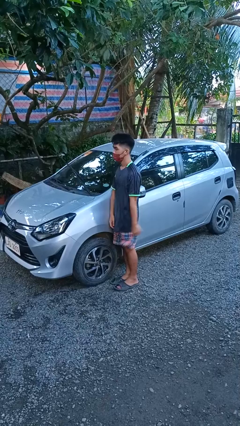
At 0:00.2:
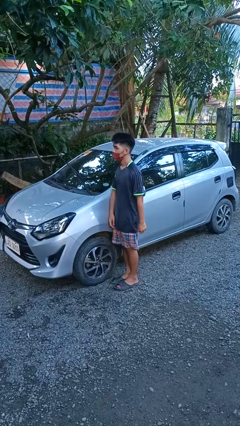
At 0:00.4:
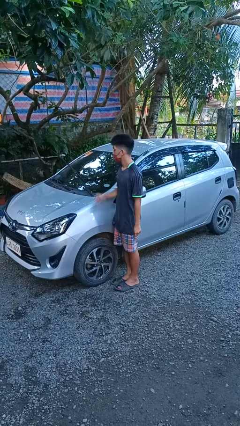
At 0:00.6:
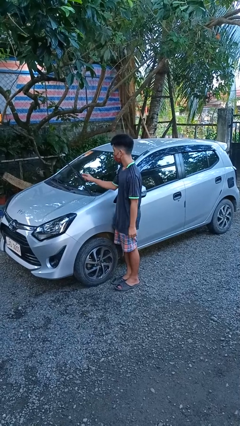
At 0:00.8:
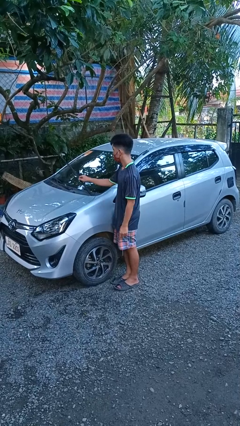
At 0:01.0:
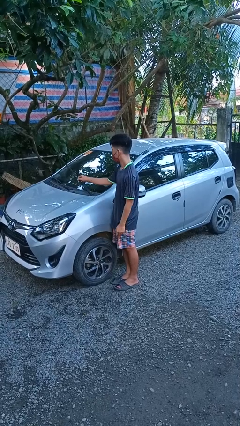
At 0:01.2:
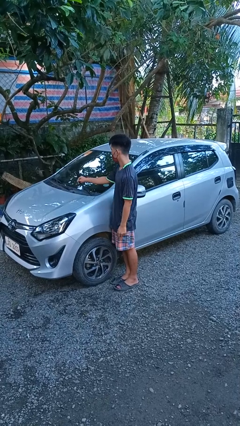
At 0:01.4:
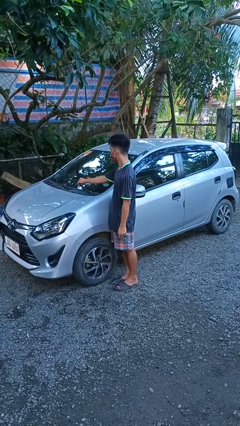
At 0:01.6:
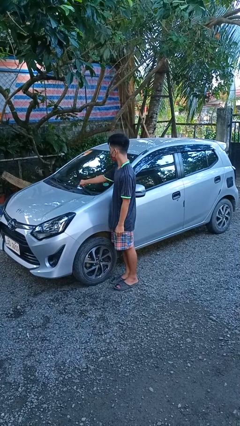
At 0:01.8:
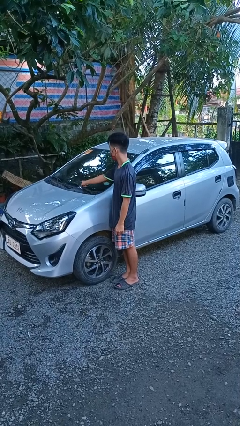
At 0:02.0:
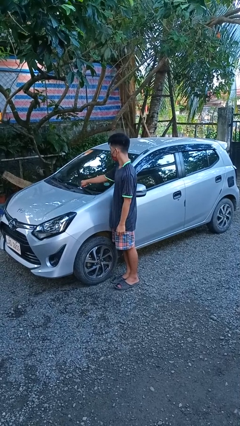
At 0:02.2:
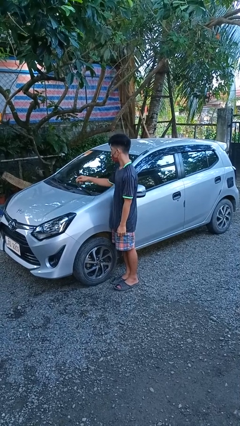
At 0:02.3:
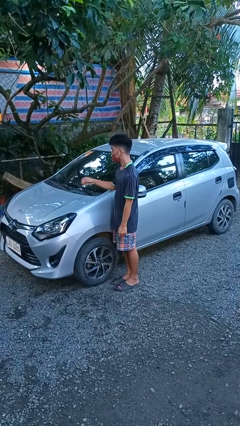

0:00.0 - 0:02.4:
person flips down car wipers

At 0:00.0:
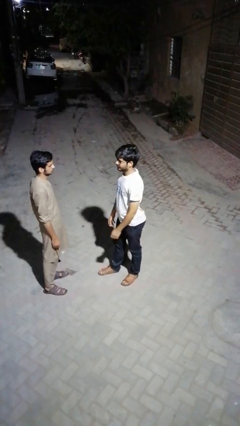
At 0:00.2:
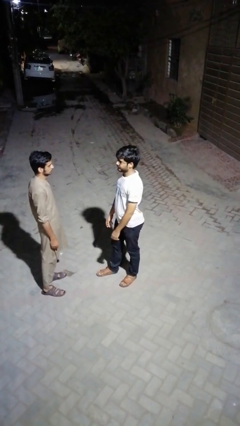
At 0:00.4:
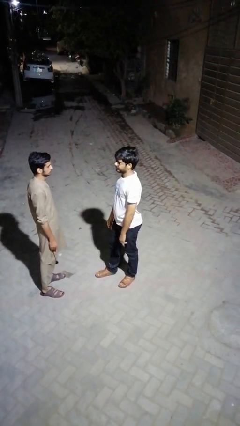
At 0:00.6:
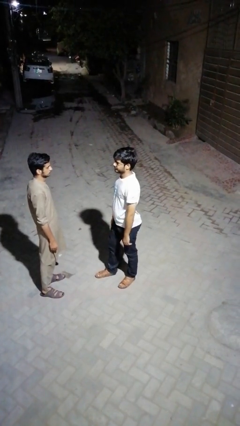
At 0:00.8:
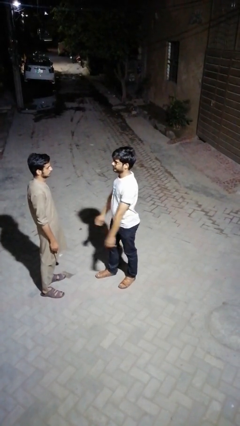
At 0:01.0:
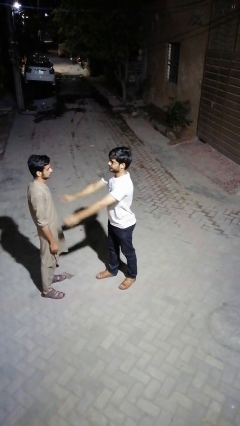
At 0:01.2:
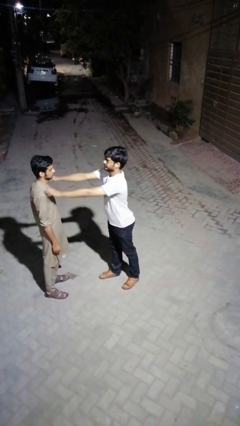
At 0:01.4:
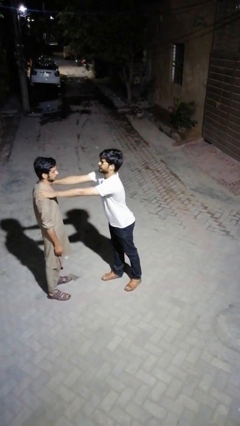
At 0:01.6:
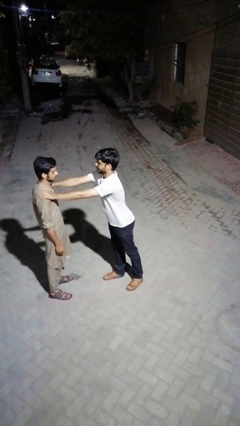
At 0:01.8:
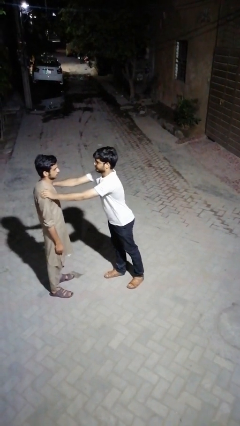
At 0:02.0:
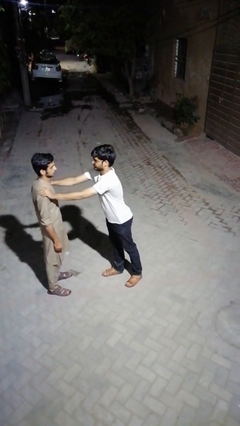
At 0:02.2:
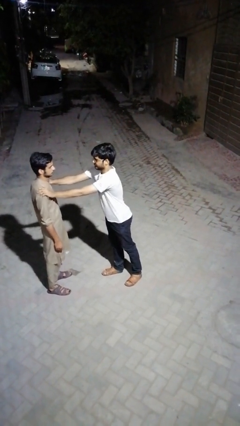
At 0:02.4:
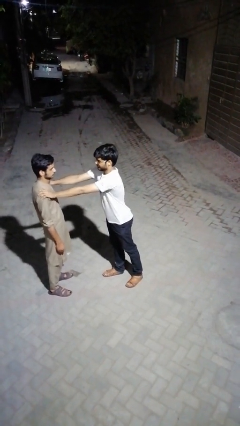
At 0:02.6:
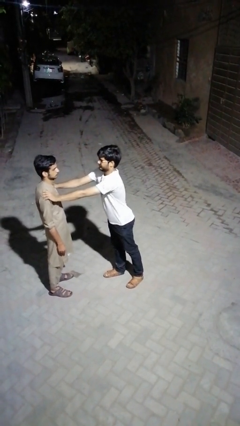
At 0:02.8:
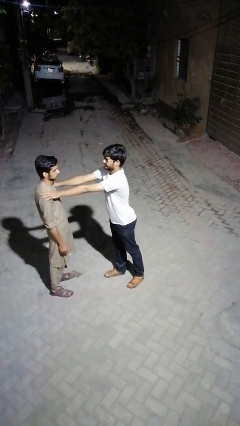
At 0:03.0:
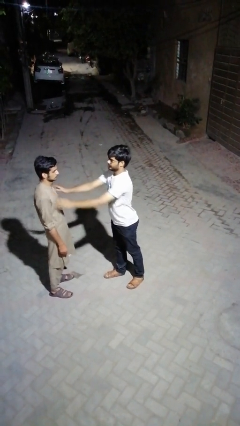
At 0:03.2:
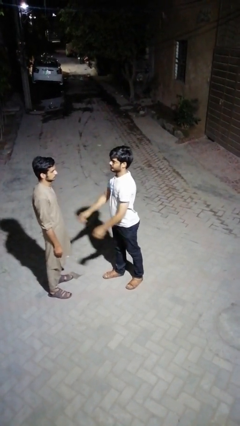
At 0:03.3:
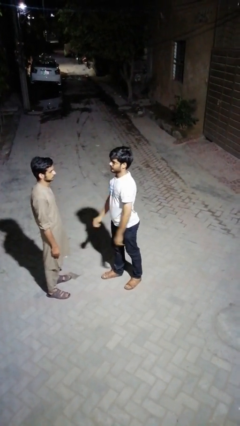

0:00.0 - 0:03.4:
person pounds shoulders of person

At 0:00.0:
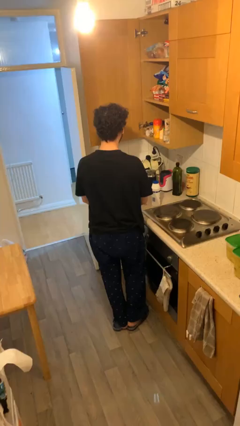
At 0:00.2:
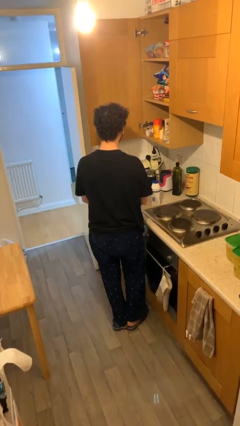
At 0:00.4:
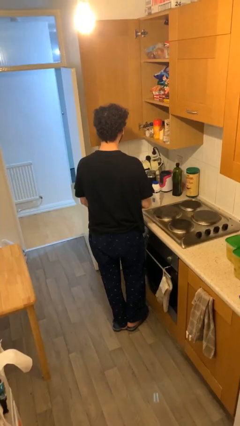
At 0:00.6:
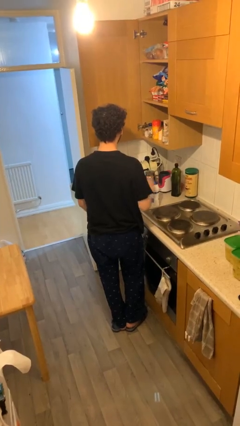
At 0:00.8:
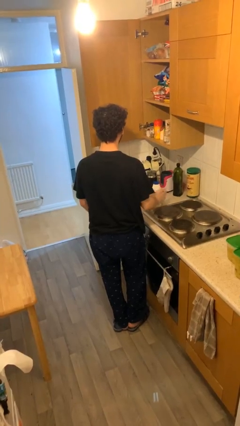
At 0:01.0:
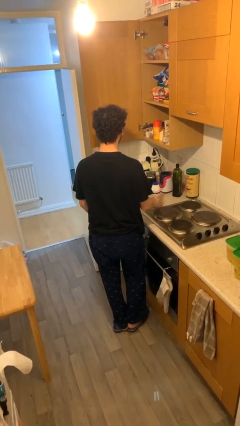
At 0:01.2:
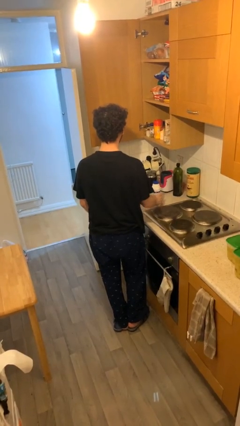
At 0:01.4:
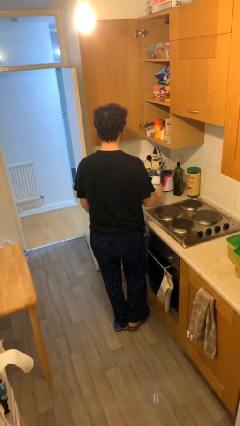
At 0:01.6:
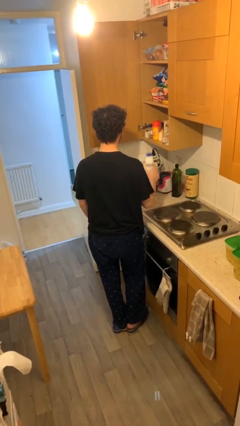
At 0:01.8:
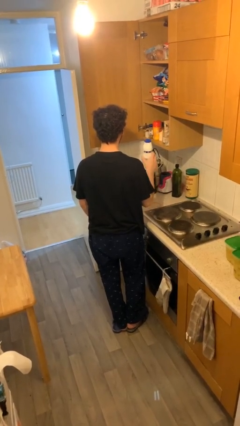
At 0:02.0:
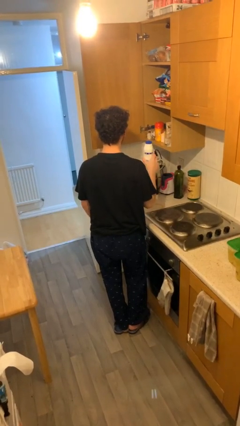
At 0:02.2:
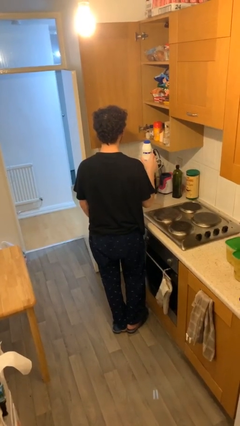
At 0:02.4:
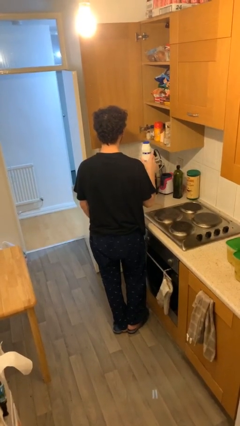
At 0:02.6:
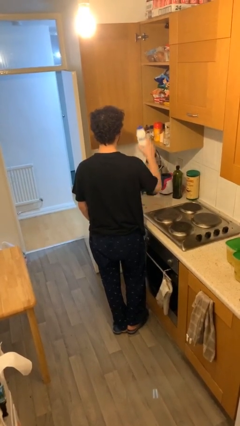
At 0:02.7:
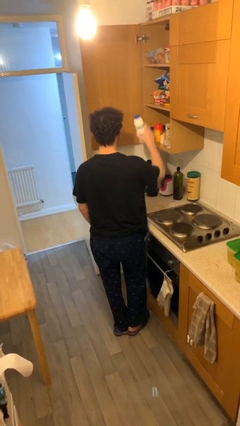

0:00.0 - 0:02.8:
person picks up object from table

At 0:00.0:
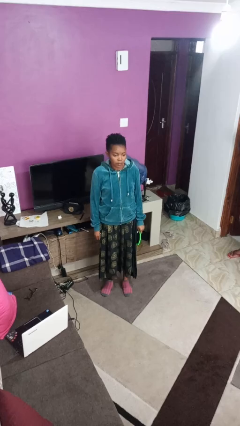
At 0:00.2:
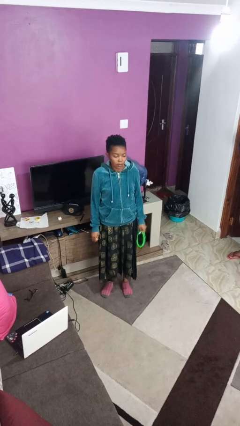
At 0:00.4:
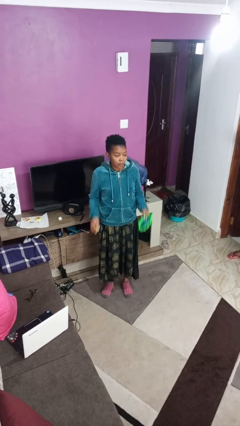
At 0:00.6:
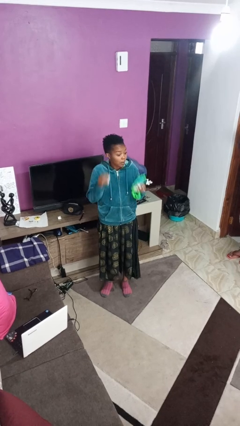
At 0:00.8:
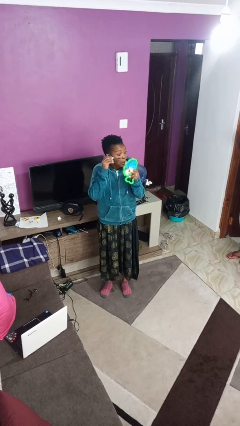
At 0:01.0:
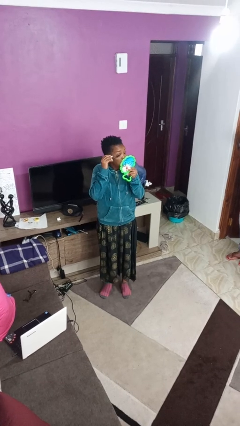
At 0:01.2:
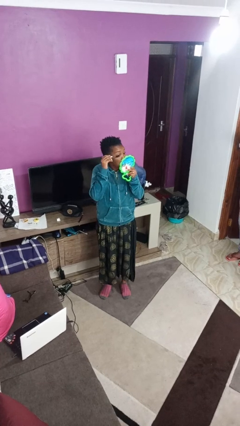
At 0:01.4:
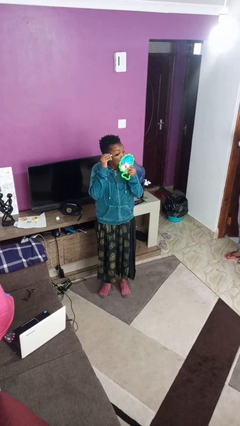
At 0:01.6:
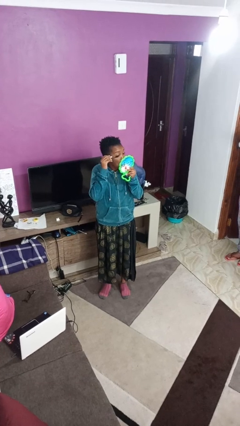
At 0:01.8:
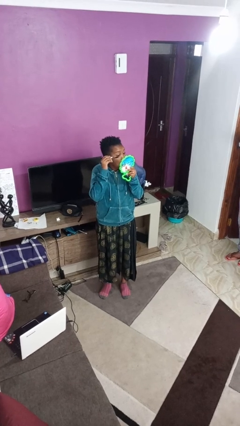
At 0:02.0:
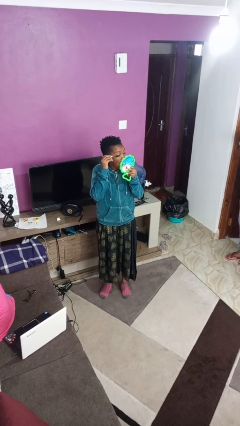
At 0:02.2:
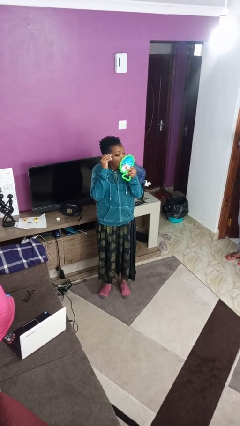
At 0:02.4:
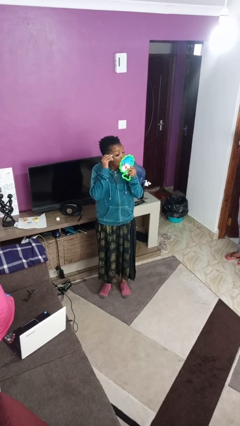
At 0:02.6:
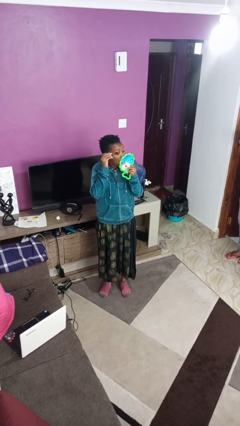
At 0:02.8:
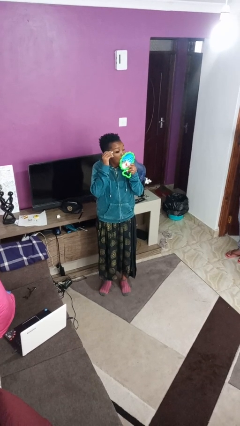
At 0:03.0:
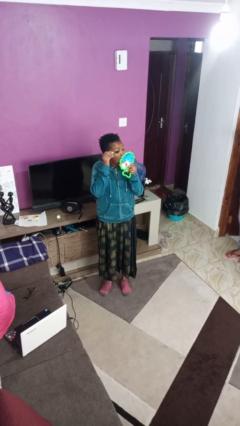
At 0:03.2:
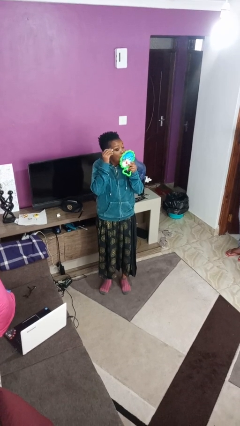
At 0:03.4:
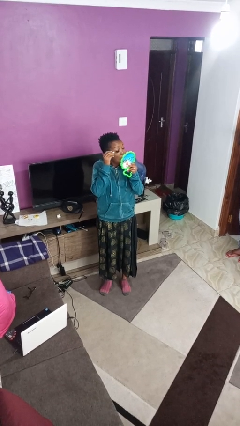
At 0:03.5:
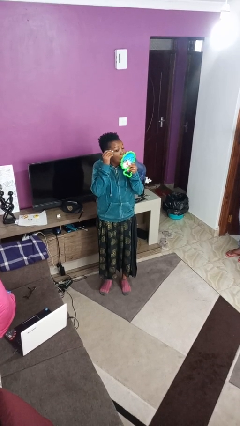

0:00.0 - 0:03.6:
person applies eye makeup

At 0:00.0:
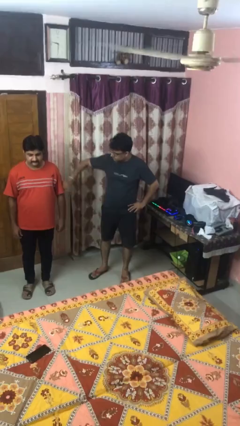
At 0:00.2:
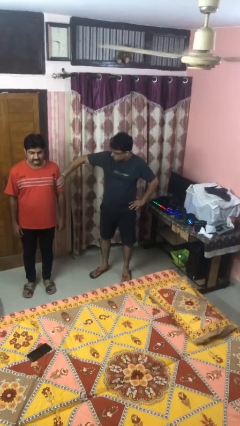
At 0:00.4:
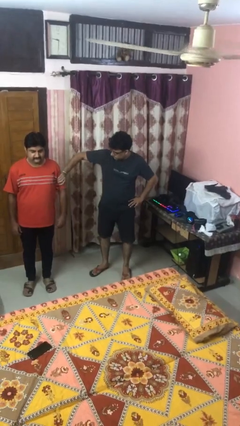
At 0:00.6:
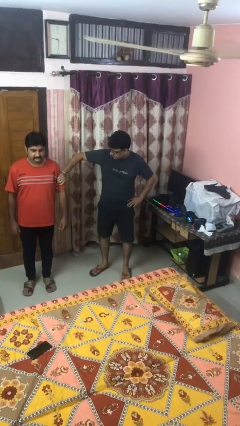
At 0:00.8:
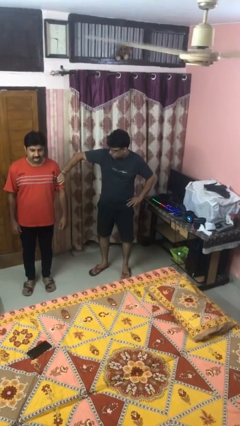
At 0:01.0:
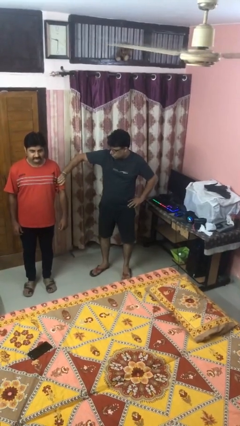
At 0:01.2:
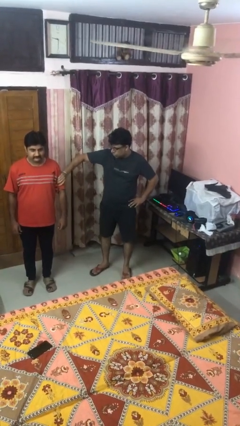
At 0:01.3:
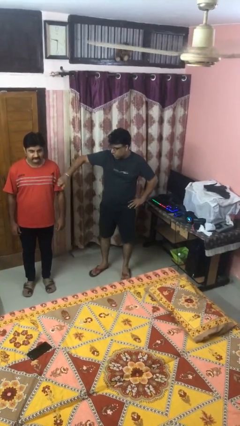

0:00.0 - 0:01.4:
person grabs person by bicep

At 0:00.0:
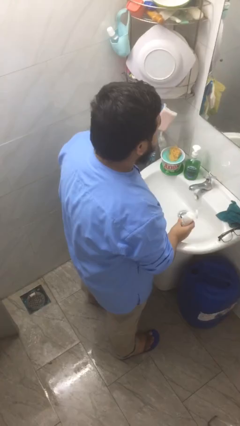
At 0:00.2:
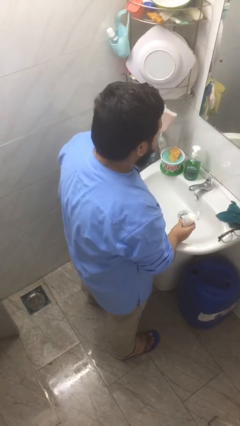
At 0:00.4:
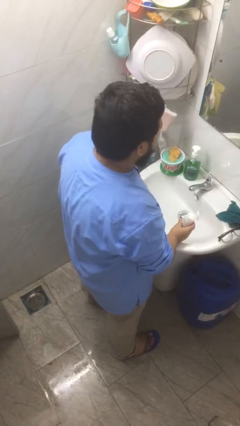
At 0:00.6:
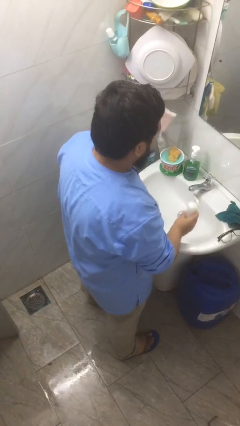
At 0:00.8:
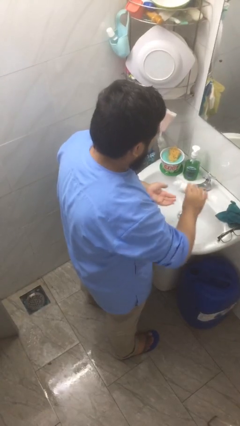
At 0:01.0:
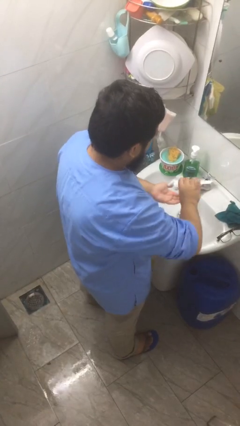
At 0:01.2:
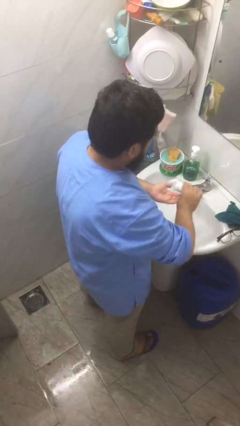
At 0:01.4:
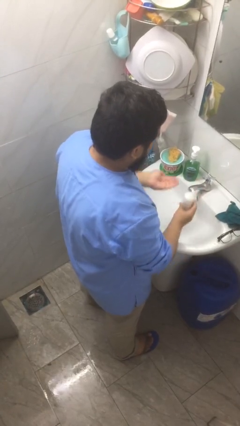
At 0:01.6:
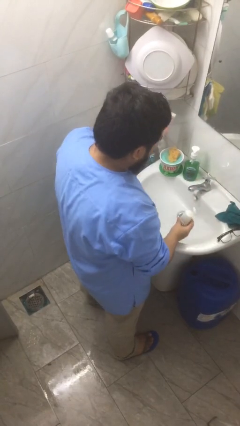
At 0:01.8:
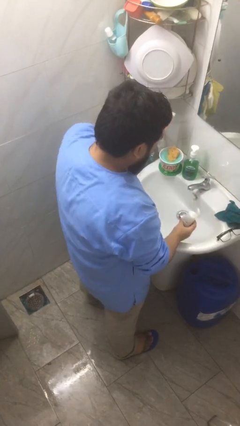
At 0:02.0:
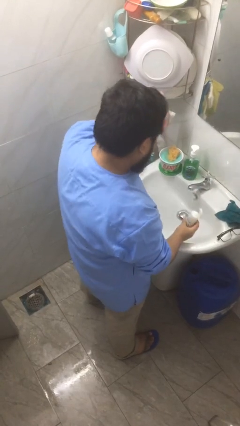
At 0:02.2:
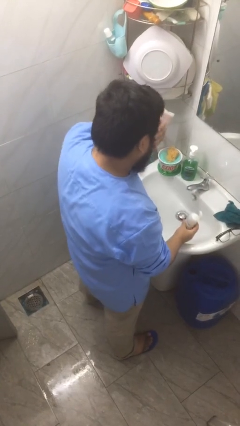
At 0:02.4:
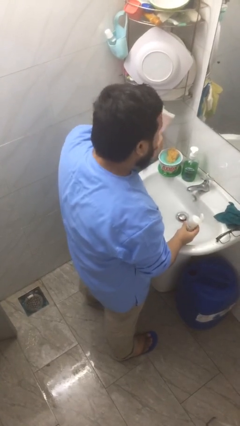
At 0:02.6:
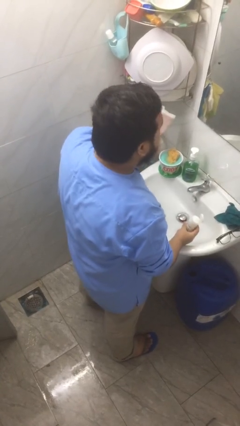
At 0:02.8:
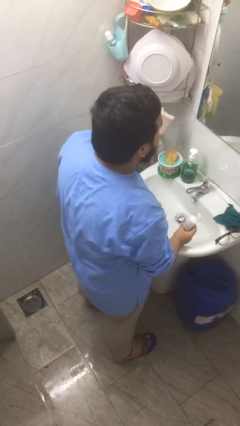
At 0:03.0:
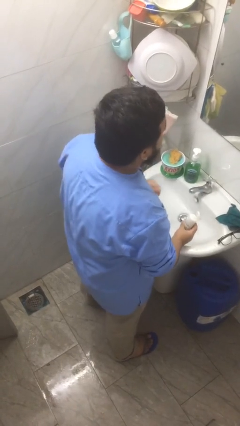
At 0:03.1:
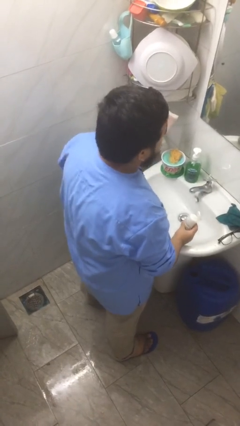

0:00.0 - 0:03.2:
person applies facial moisturizer

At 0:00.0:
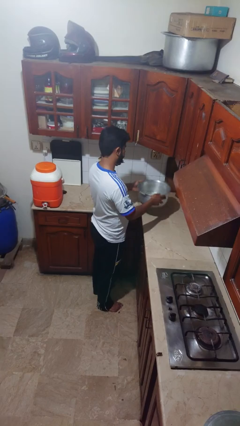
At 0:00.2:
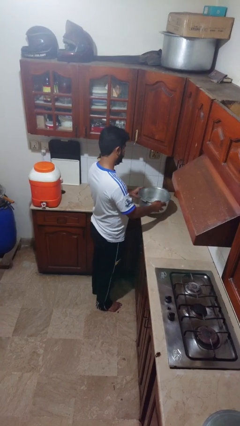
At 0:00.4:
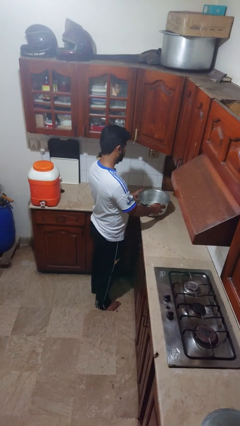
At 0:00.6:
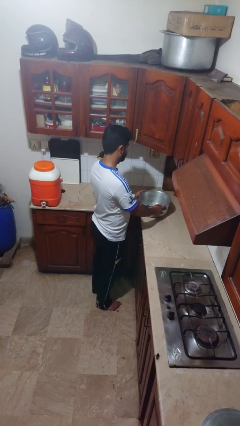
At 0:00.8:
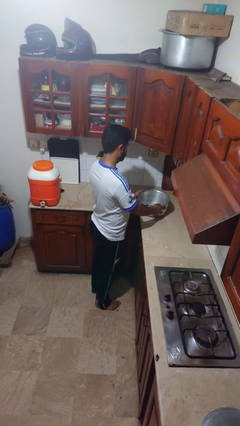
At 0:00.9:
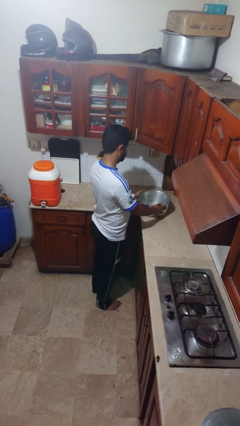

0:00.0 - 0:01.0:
person puts down object on countertop
